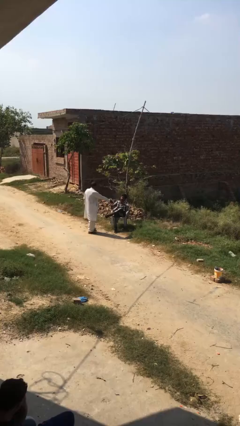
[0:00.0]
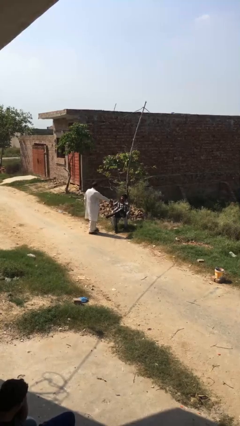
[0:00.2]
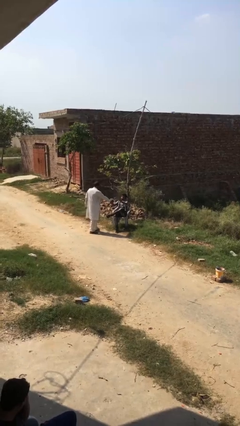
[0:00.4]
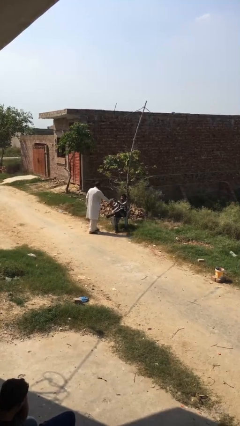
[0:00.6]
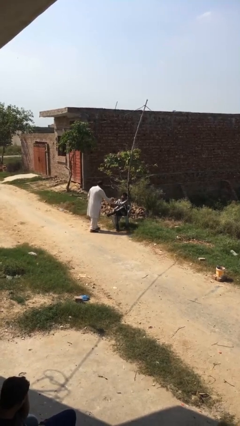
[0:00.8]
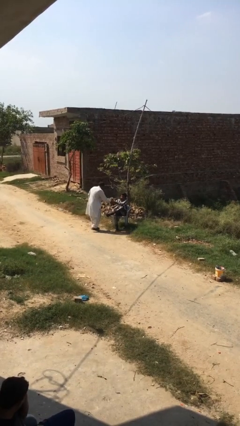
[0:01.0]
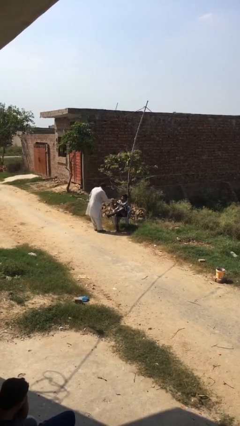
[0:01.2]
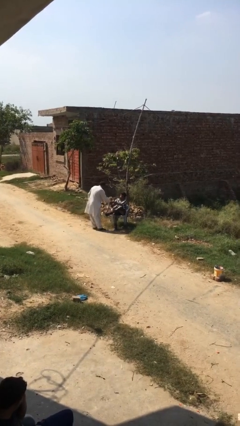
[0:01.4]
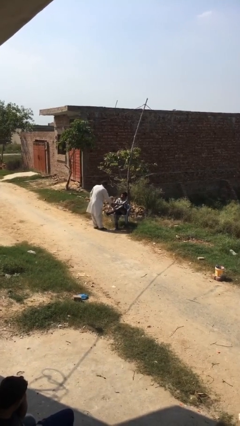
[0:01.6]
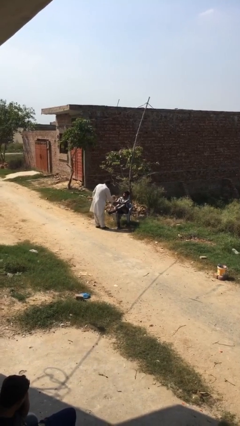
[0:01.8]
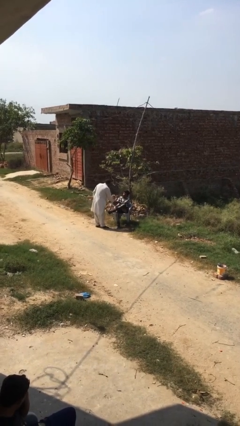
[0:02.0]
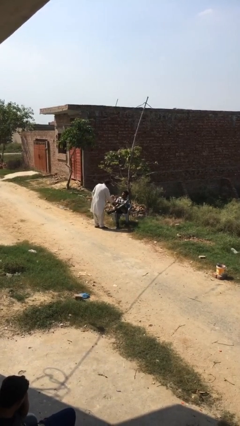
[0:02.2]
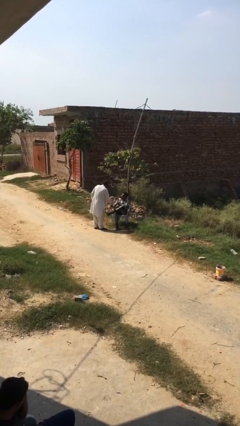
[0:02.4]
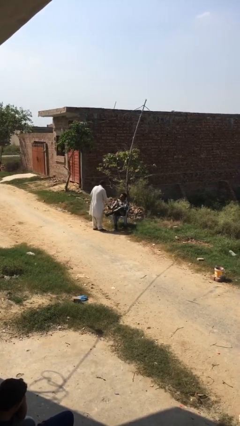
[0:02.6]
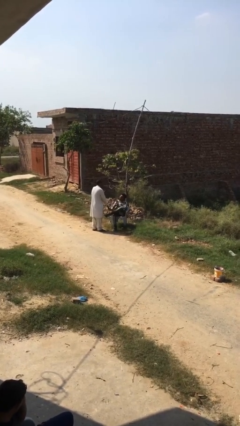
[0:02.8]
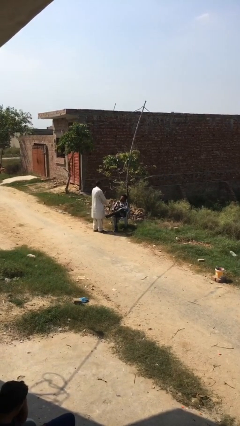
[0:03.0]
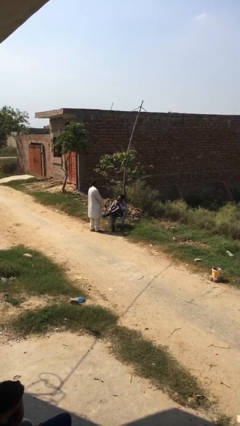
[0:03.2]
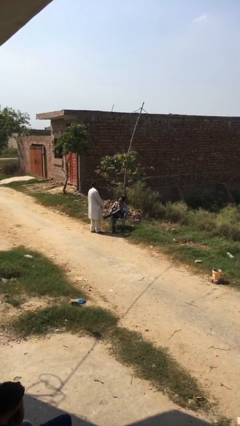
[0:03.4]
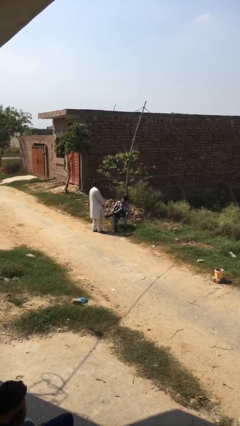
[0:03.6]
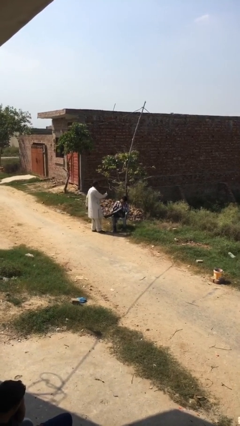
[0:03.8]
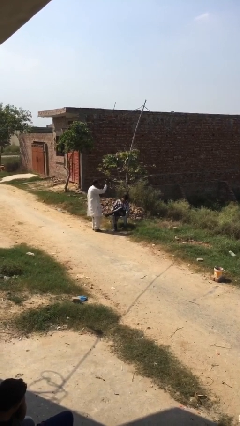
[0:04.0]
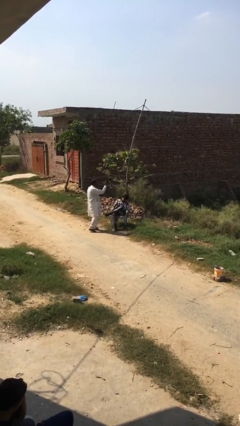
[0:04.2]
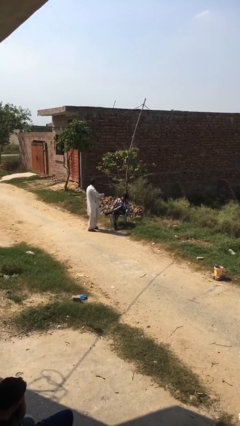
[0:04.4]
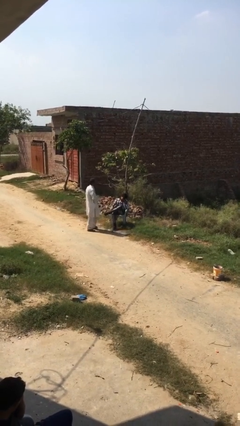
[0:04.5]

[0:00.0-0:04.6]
person shakes hand

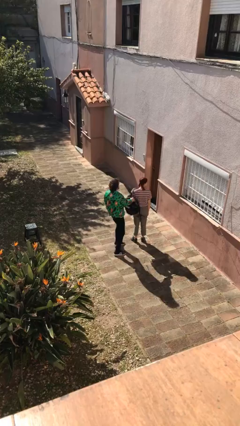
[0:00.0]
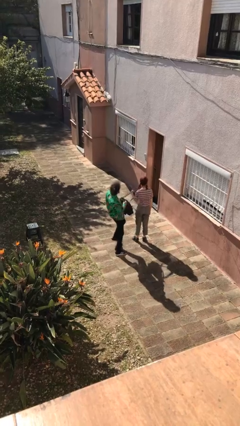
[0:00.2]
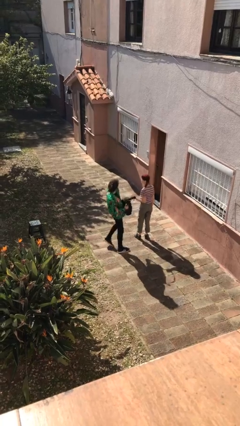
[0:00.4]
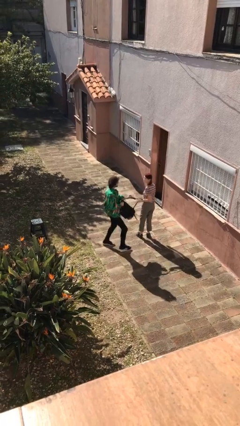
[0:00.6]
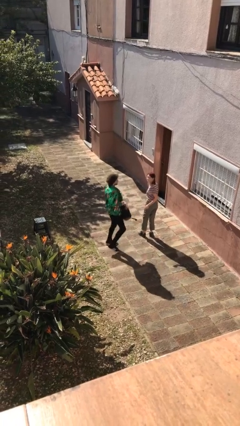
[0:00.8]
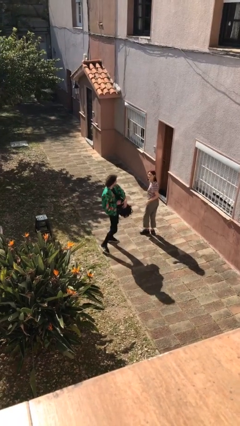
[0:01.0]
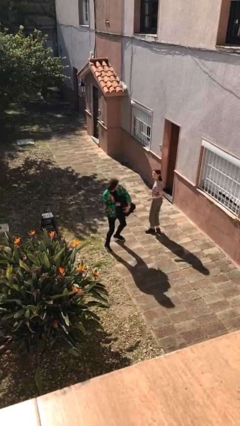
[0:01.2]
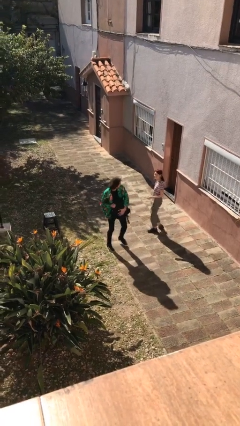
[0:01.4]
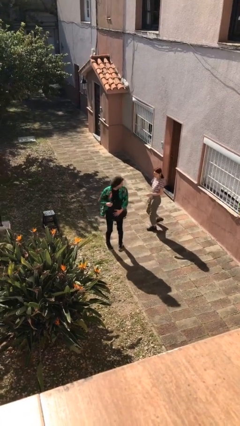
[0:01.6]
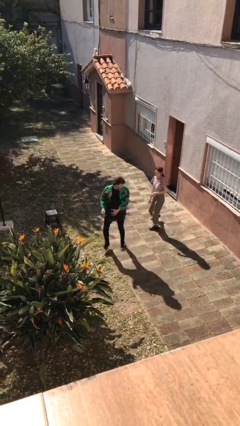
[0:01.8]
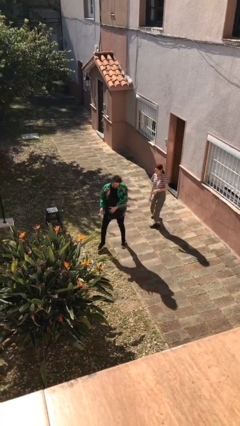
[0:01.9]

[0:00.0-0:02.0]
person steals object from person

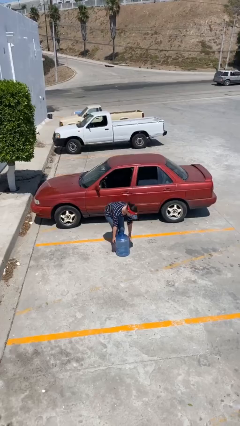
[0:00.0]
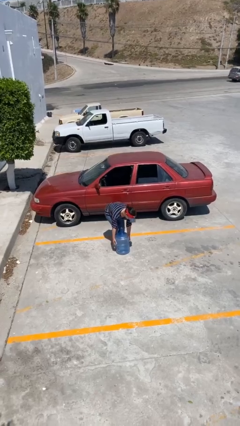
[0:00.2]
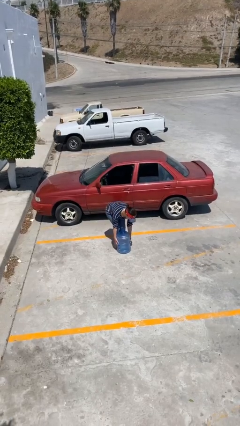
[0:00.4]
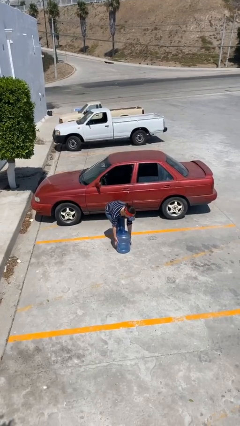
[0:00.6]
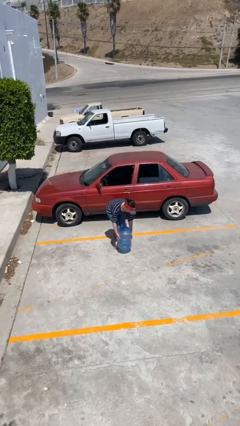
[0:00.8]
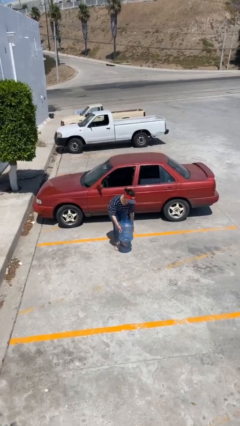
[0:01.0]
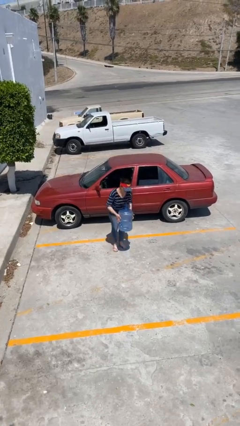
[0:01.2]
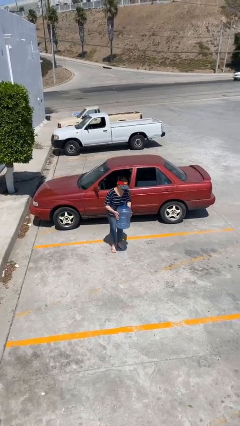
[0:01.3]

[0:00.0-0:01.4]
person picks up object from floor

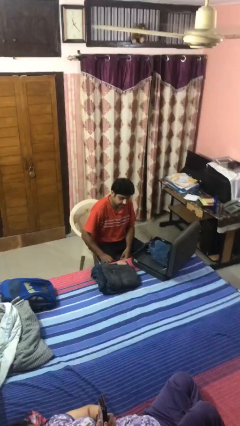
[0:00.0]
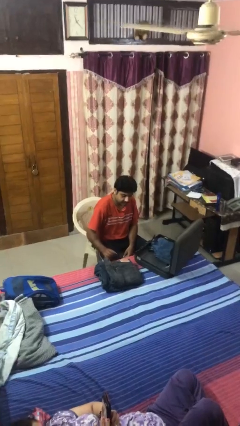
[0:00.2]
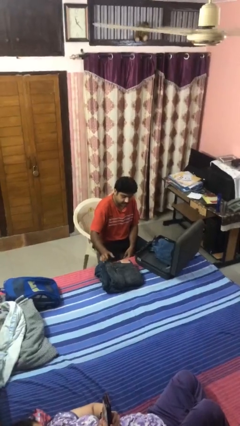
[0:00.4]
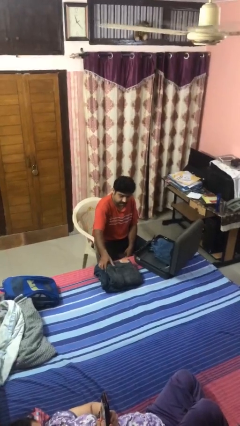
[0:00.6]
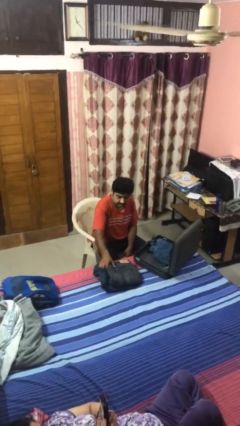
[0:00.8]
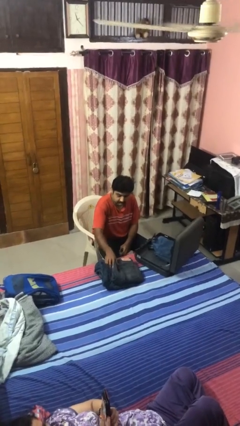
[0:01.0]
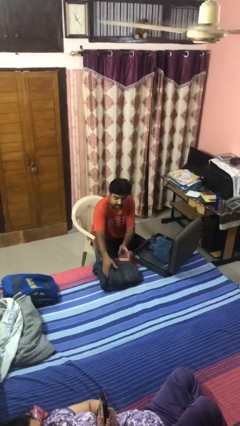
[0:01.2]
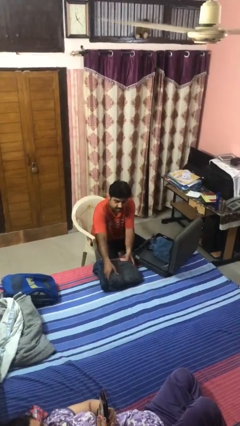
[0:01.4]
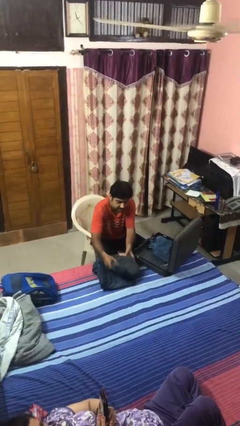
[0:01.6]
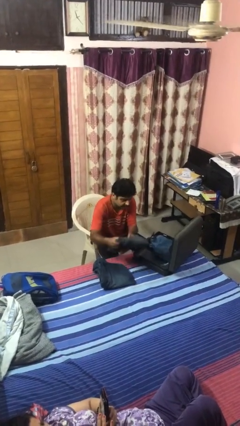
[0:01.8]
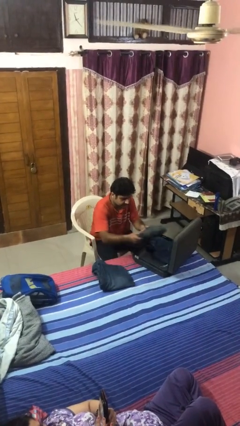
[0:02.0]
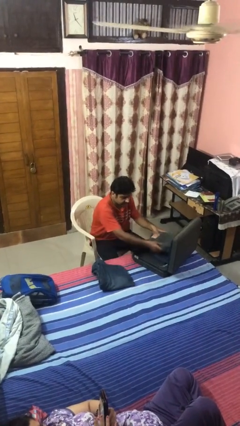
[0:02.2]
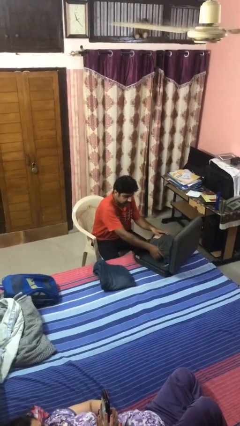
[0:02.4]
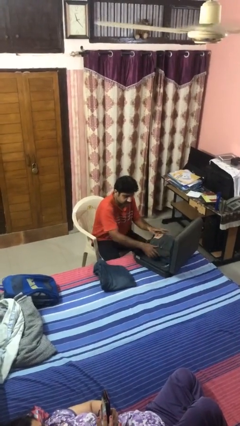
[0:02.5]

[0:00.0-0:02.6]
person loads clothes into suitcase

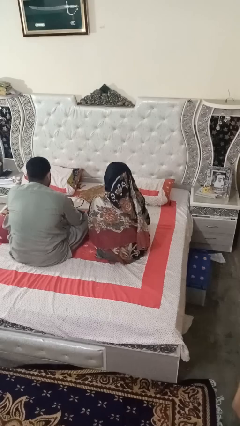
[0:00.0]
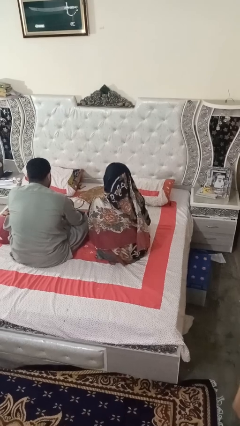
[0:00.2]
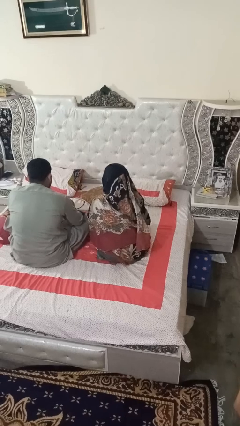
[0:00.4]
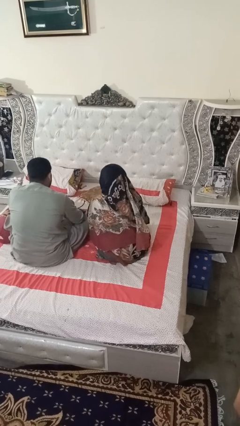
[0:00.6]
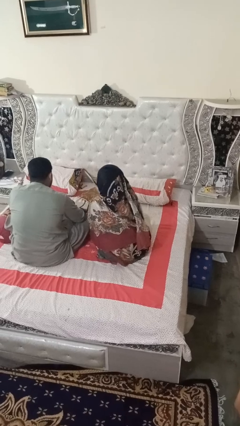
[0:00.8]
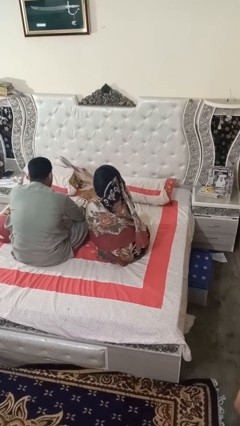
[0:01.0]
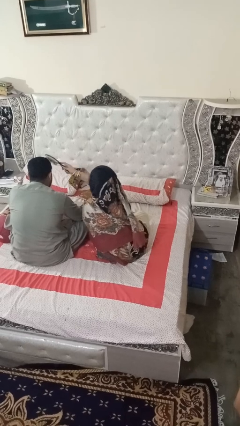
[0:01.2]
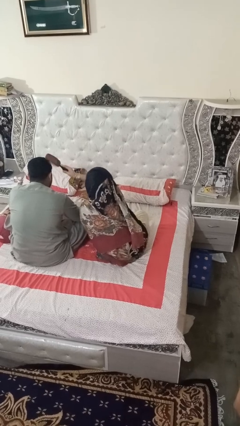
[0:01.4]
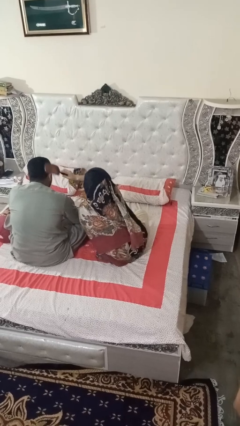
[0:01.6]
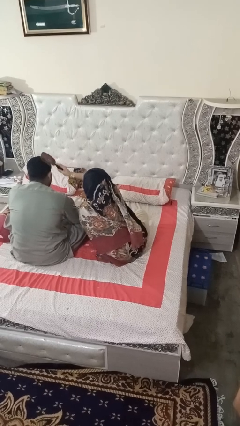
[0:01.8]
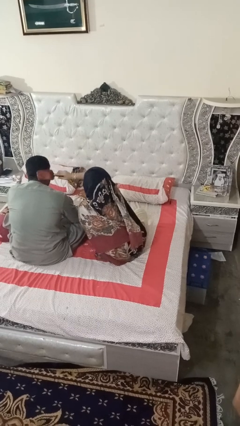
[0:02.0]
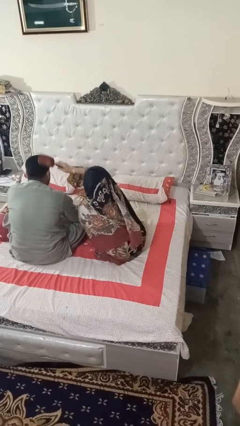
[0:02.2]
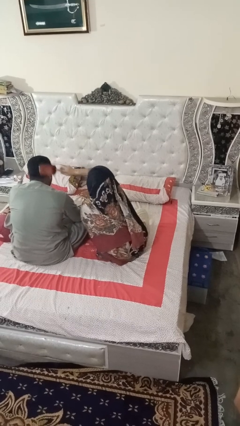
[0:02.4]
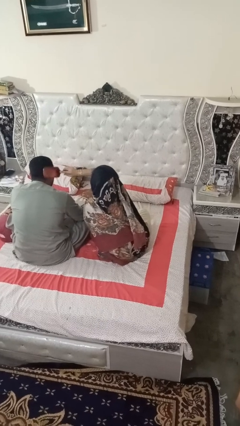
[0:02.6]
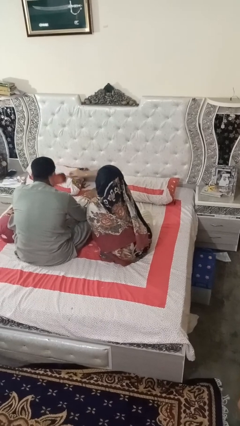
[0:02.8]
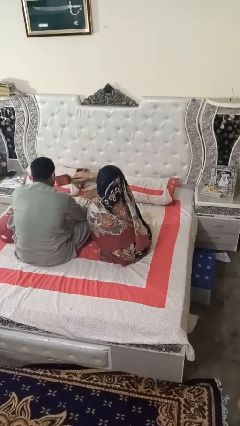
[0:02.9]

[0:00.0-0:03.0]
person brushes hair of person

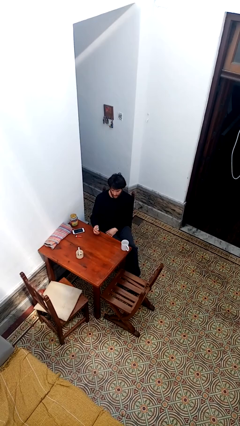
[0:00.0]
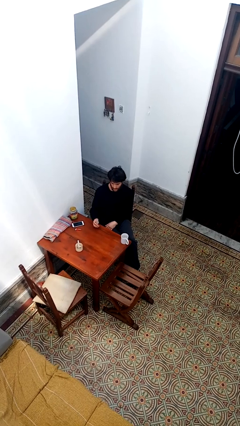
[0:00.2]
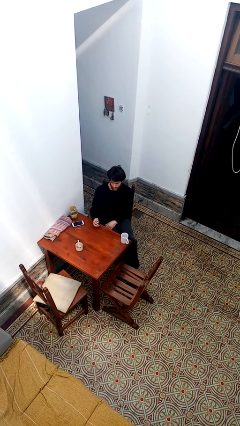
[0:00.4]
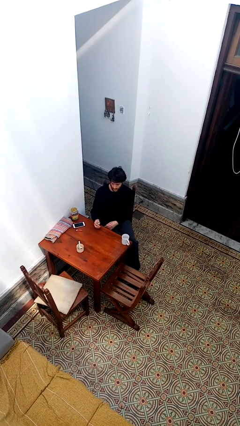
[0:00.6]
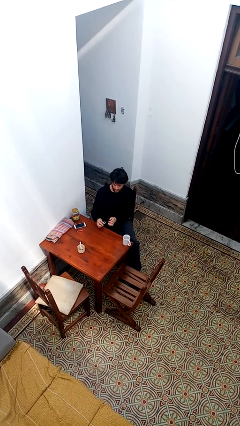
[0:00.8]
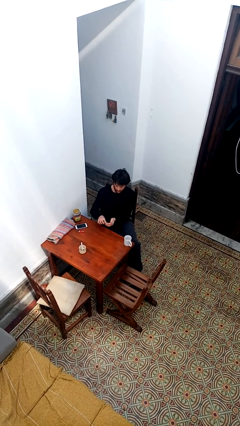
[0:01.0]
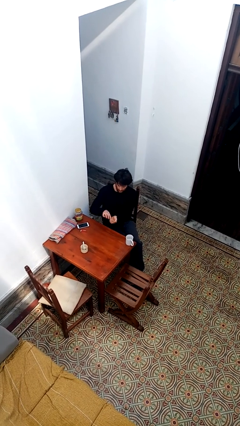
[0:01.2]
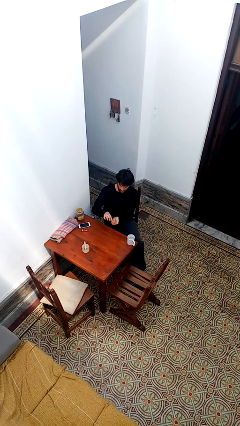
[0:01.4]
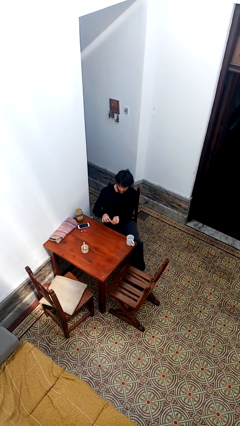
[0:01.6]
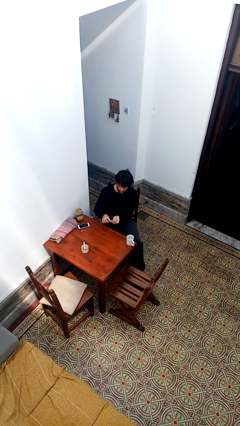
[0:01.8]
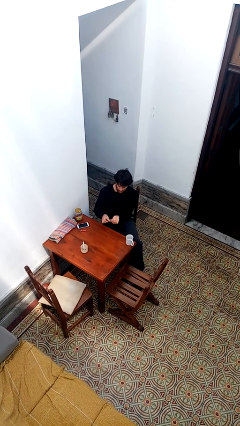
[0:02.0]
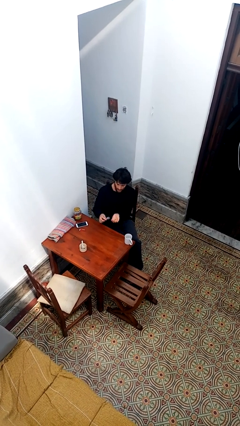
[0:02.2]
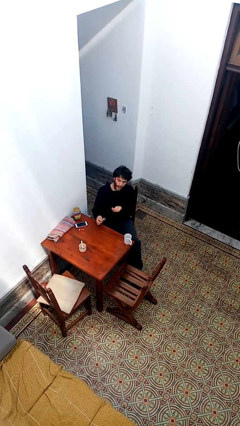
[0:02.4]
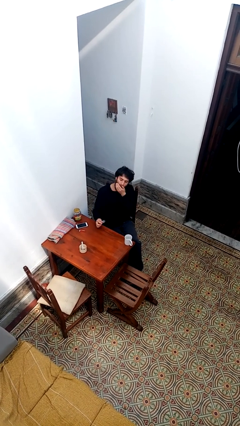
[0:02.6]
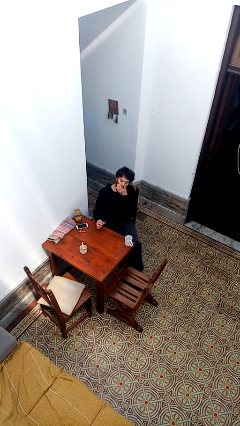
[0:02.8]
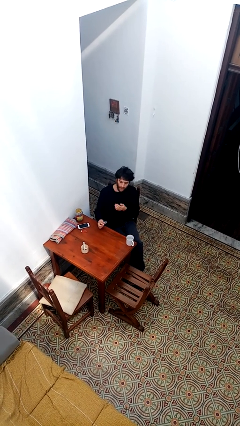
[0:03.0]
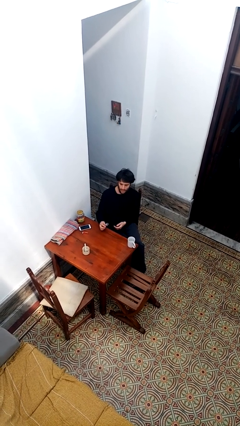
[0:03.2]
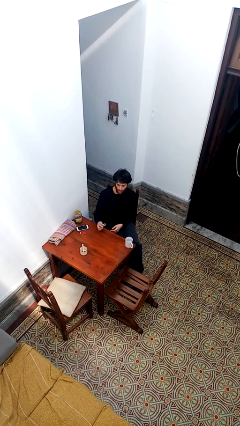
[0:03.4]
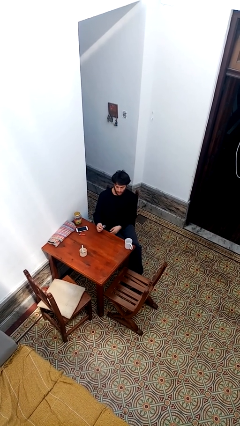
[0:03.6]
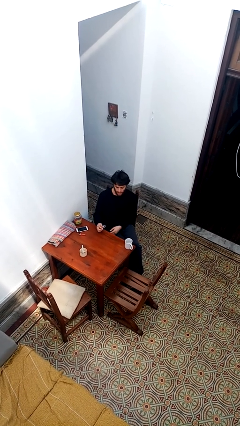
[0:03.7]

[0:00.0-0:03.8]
person takes medicine pills
